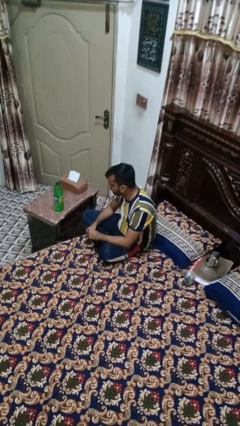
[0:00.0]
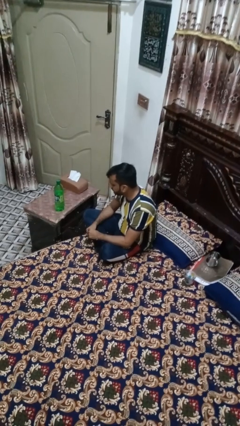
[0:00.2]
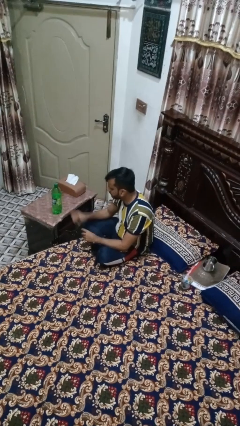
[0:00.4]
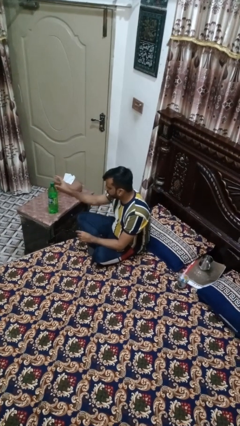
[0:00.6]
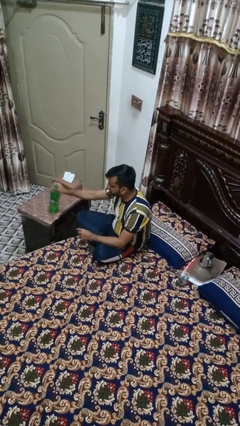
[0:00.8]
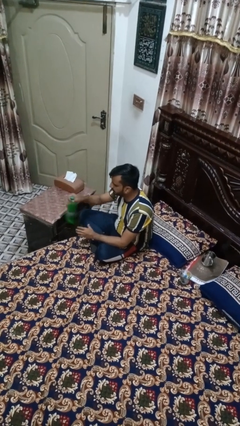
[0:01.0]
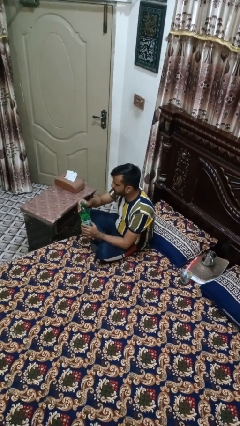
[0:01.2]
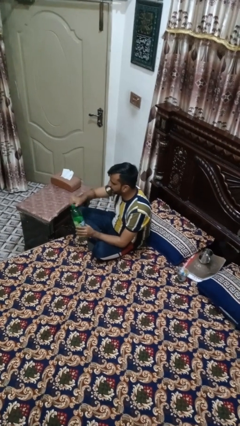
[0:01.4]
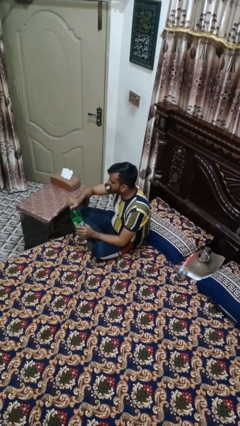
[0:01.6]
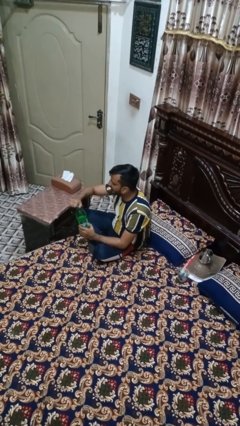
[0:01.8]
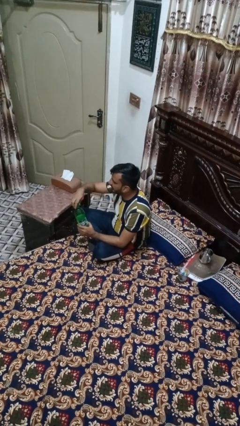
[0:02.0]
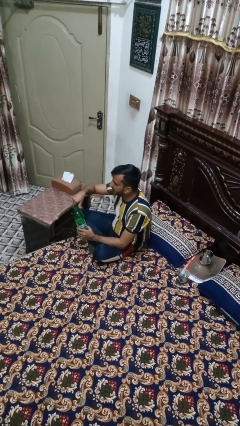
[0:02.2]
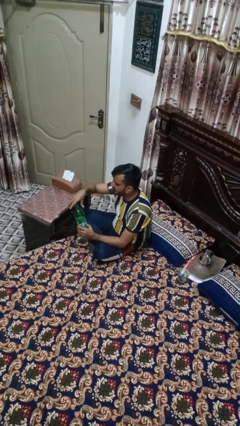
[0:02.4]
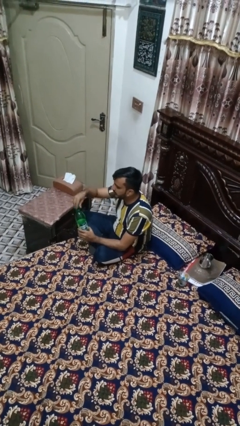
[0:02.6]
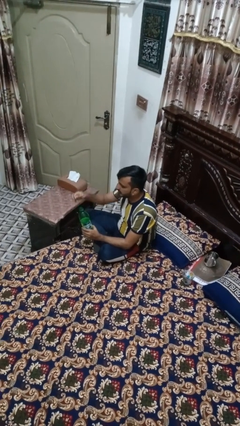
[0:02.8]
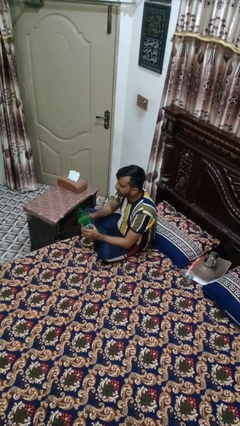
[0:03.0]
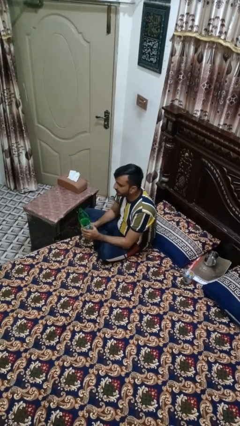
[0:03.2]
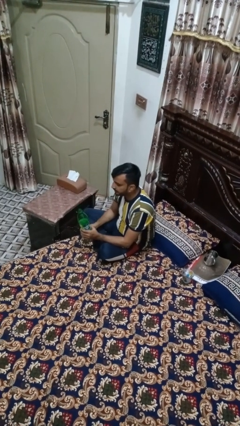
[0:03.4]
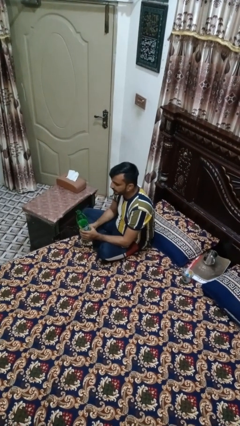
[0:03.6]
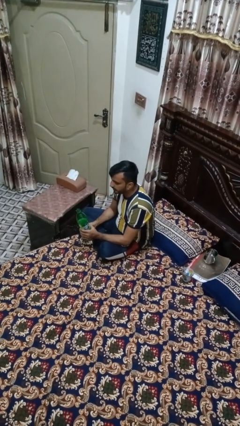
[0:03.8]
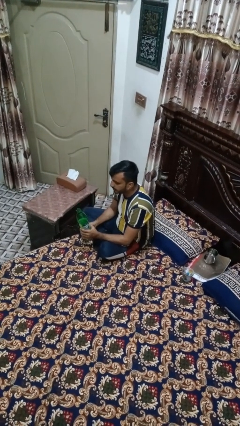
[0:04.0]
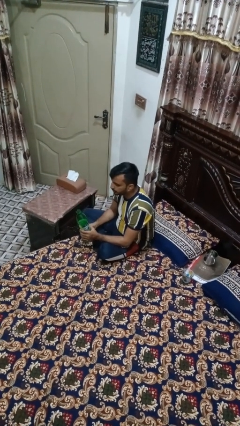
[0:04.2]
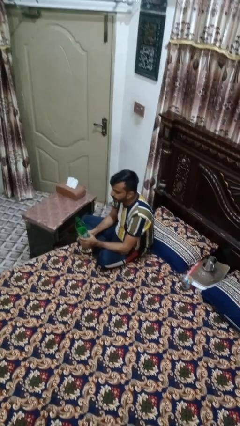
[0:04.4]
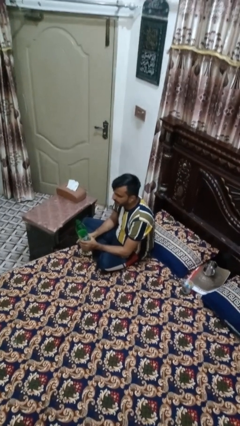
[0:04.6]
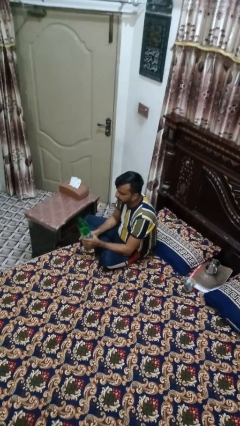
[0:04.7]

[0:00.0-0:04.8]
person unscrews lid from bottle

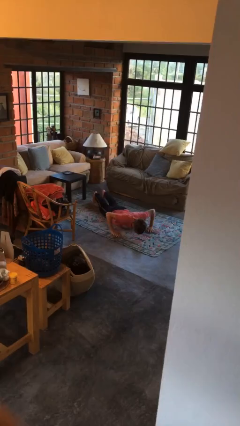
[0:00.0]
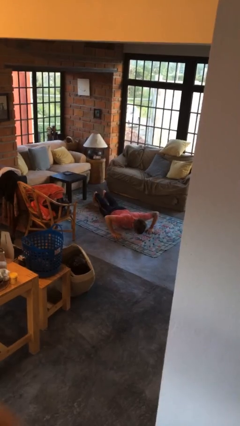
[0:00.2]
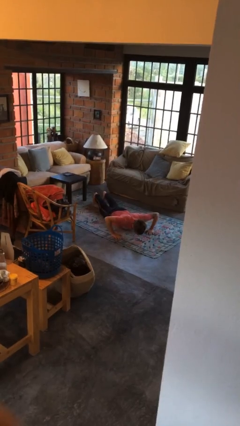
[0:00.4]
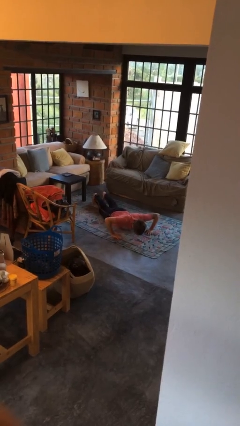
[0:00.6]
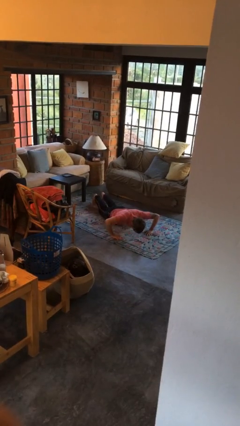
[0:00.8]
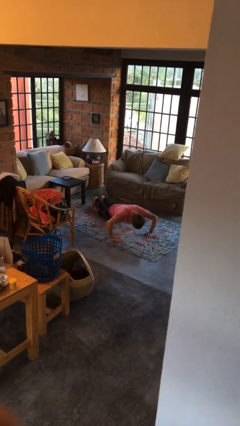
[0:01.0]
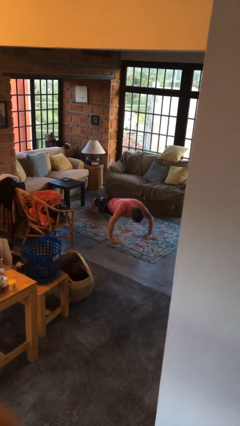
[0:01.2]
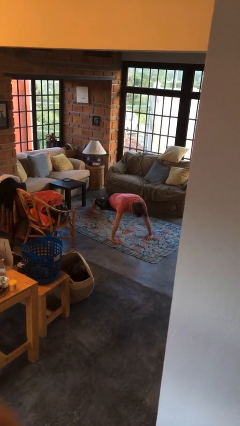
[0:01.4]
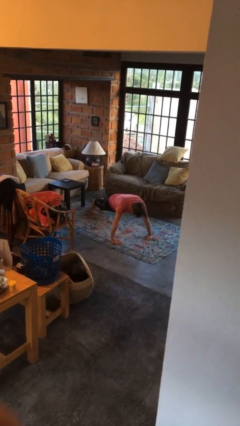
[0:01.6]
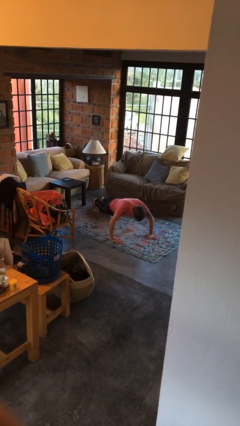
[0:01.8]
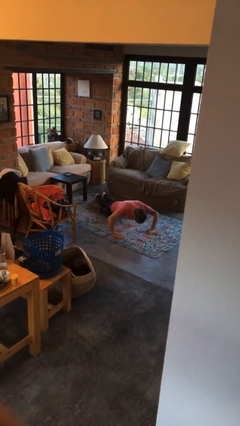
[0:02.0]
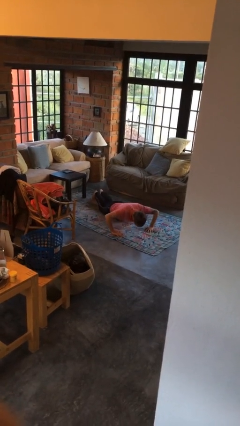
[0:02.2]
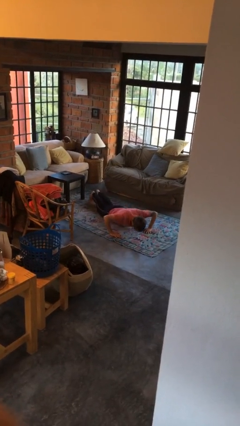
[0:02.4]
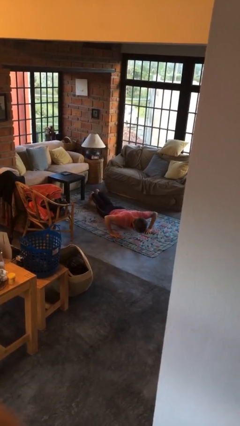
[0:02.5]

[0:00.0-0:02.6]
person exercises with pushup

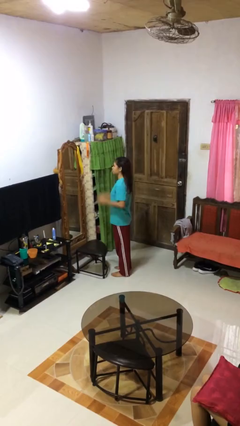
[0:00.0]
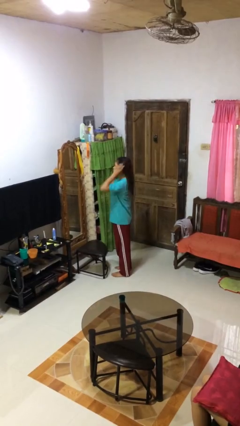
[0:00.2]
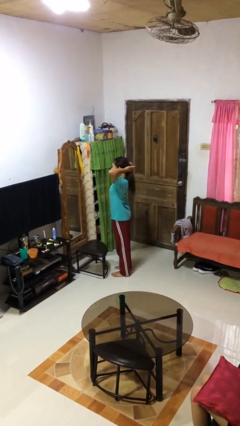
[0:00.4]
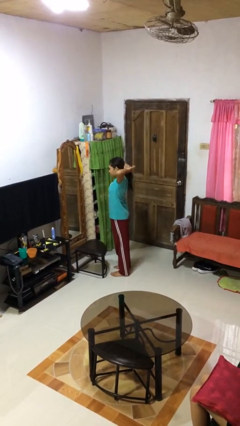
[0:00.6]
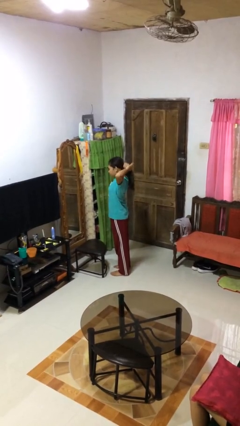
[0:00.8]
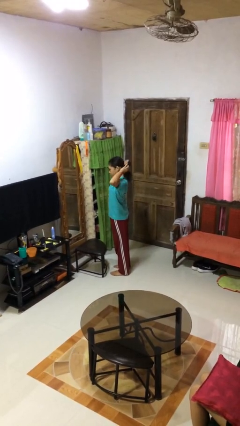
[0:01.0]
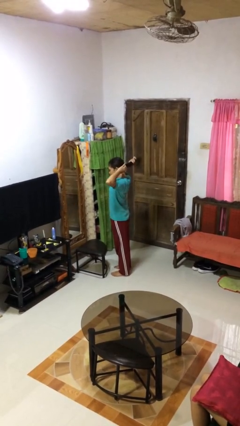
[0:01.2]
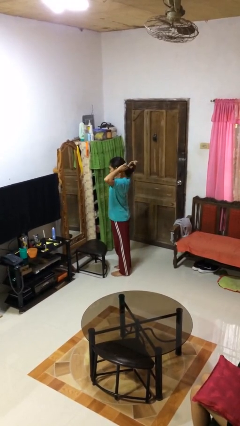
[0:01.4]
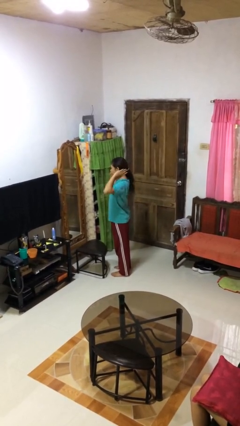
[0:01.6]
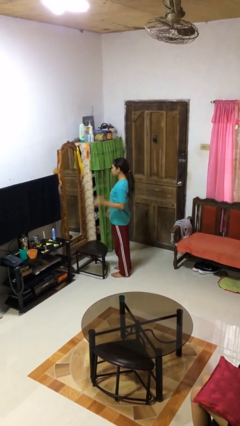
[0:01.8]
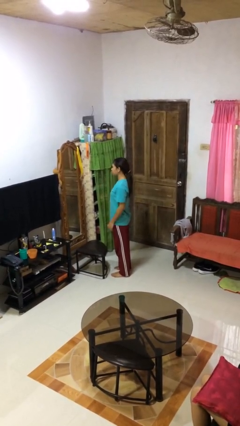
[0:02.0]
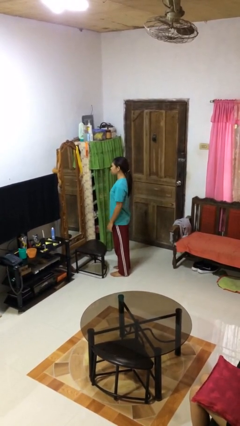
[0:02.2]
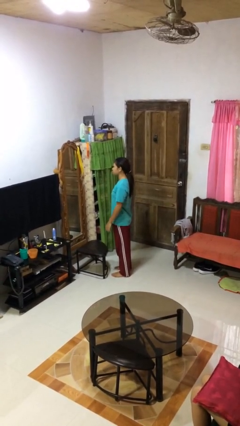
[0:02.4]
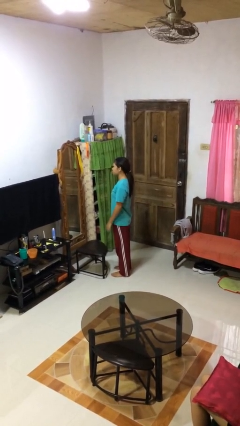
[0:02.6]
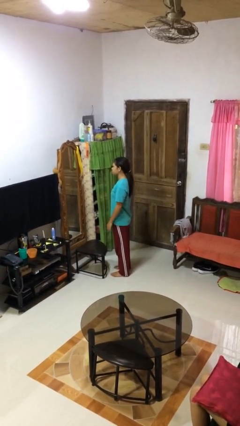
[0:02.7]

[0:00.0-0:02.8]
person puts hair in ponytail

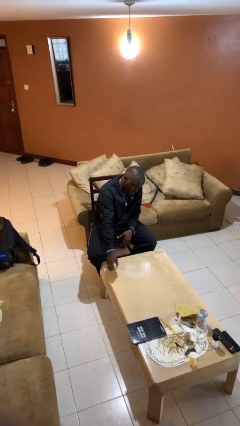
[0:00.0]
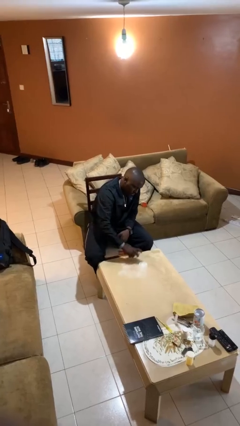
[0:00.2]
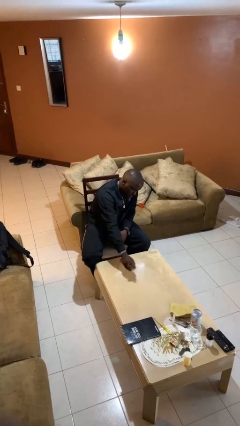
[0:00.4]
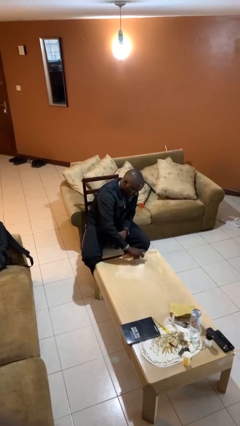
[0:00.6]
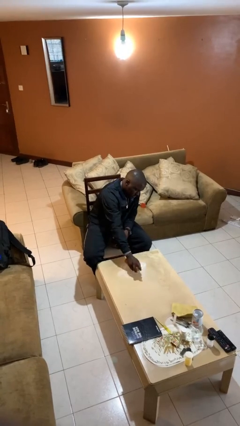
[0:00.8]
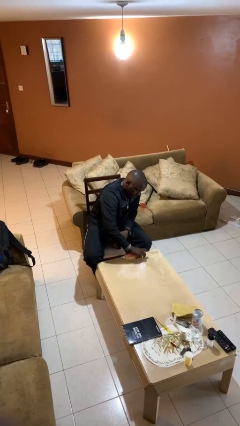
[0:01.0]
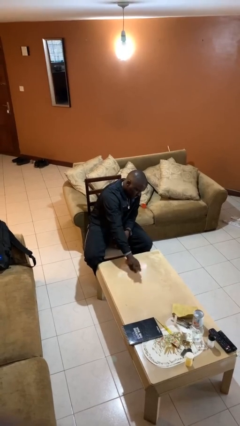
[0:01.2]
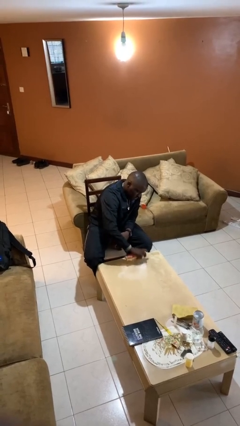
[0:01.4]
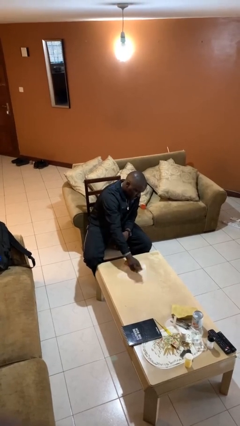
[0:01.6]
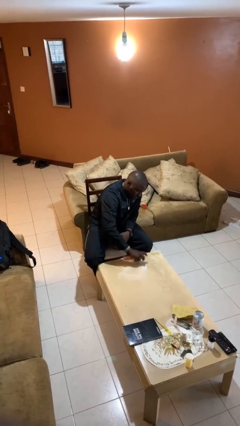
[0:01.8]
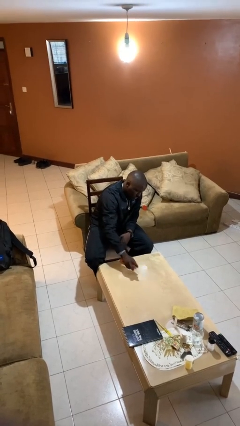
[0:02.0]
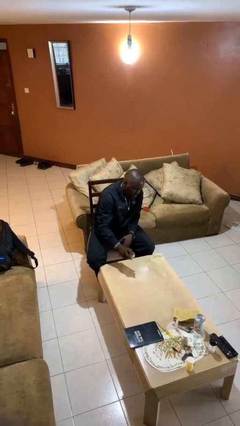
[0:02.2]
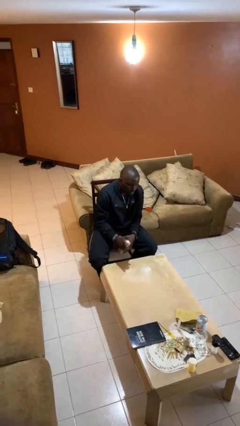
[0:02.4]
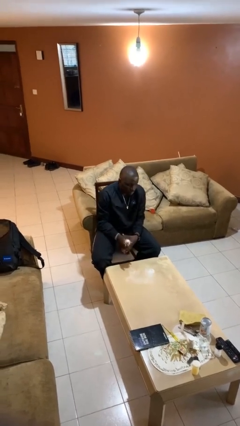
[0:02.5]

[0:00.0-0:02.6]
person sprays from bottle

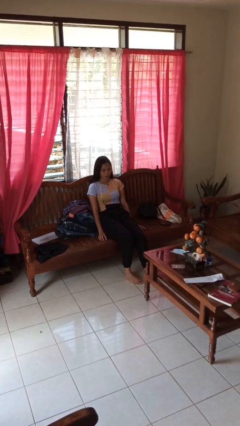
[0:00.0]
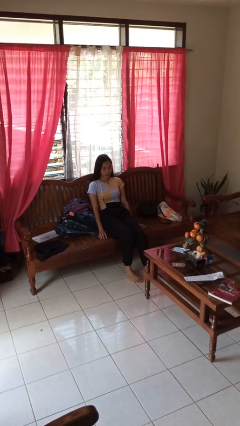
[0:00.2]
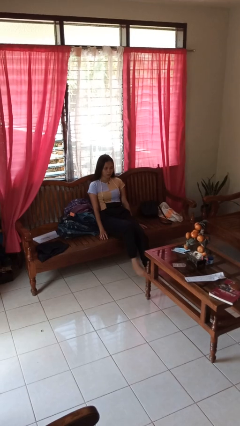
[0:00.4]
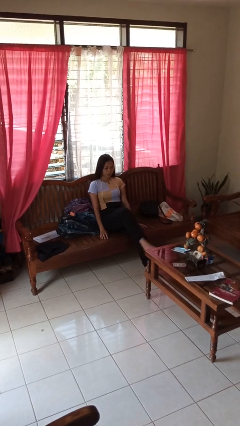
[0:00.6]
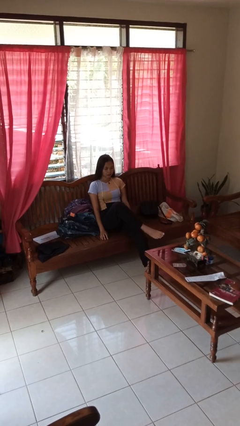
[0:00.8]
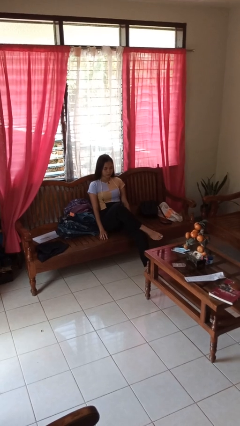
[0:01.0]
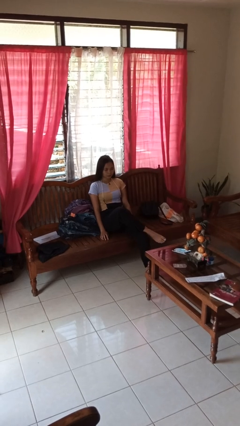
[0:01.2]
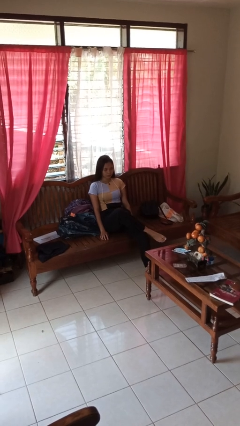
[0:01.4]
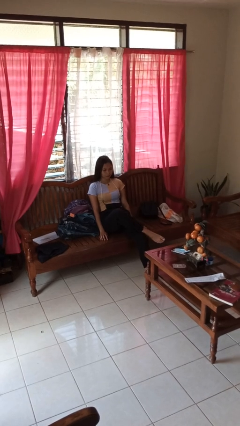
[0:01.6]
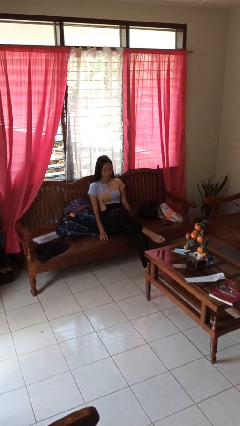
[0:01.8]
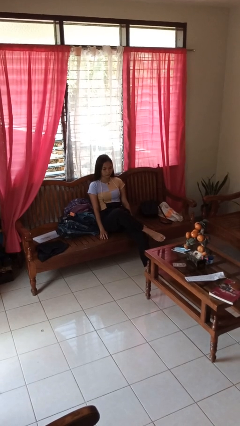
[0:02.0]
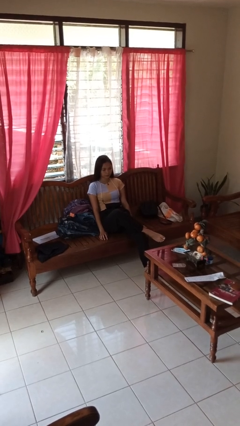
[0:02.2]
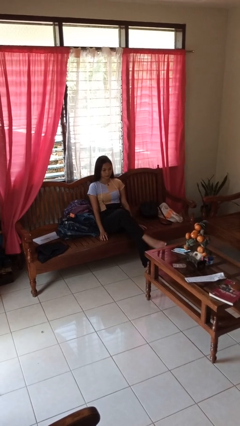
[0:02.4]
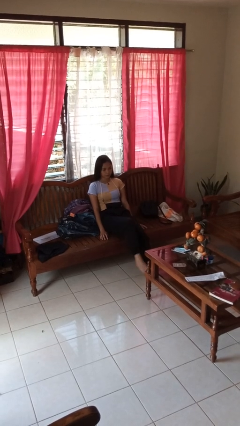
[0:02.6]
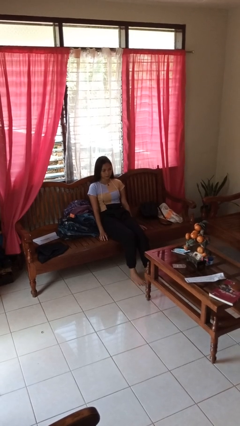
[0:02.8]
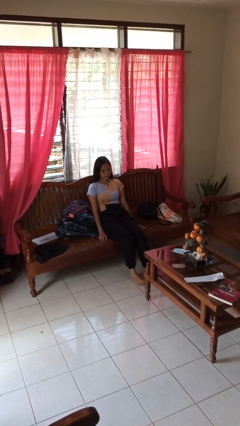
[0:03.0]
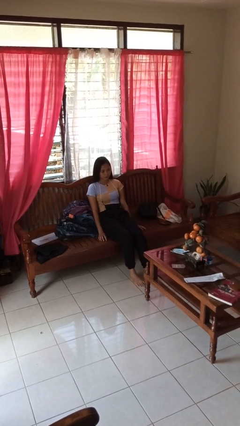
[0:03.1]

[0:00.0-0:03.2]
person crosses legs

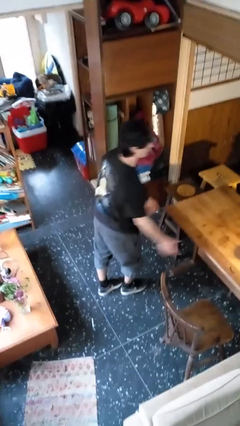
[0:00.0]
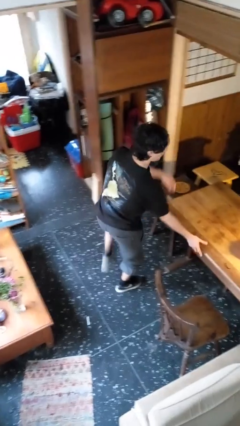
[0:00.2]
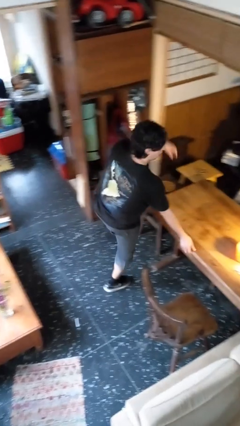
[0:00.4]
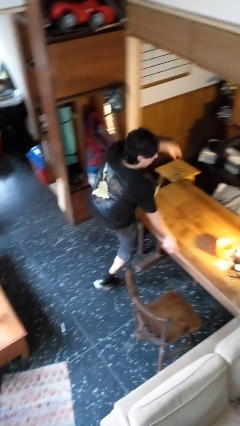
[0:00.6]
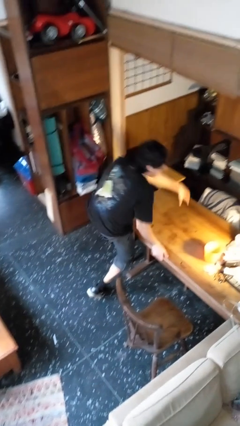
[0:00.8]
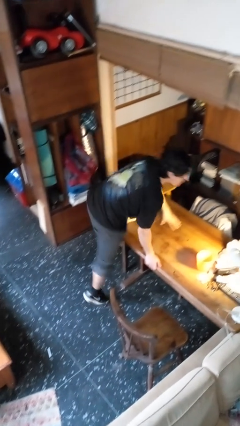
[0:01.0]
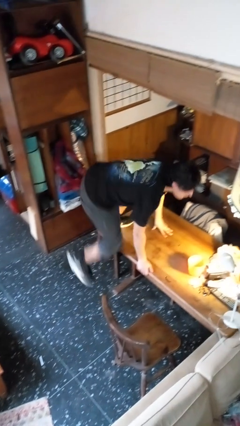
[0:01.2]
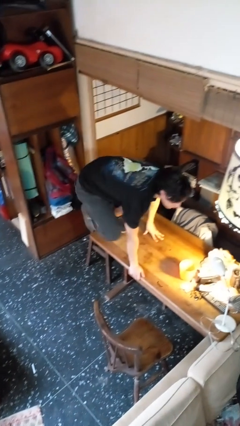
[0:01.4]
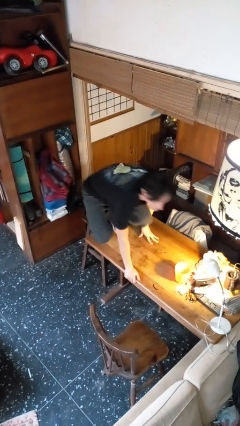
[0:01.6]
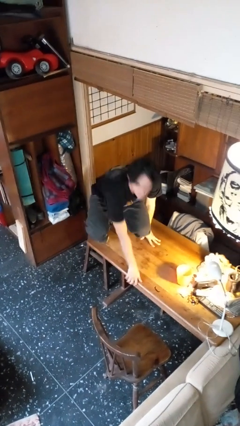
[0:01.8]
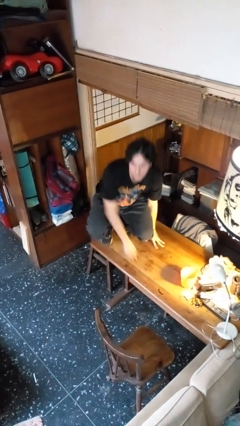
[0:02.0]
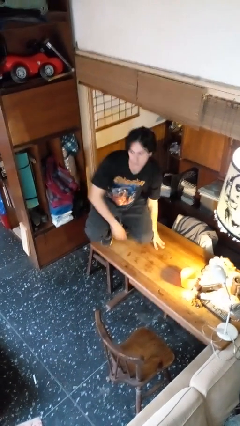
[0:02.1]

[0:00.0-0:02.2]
person climbs on table
